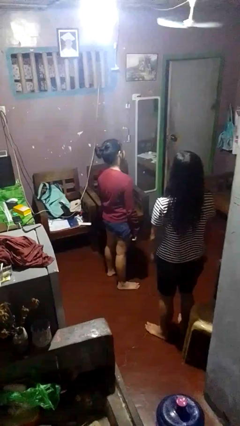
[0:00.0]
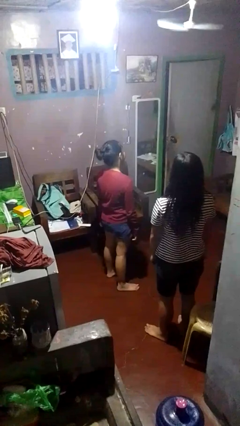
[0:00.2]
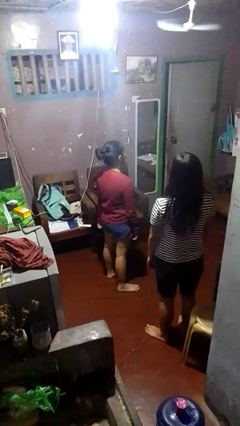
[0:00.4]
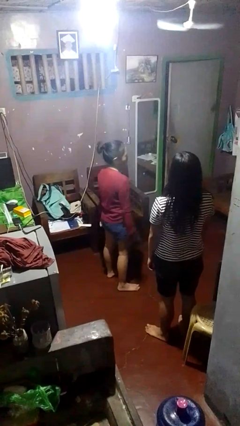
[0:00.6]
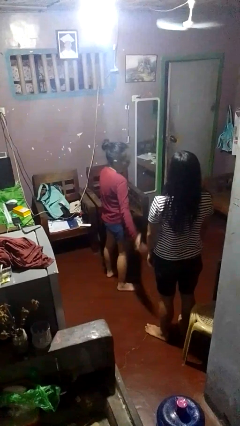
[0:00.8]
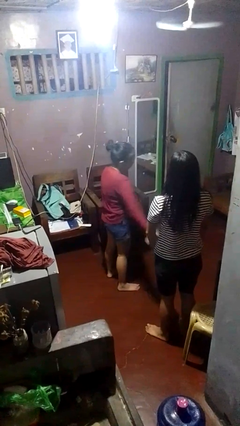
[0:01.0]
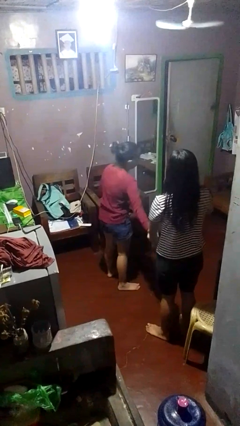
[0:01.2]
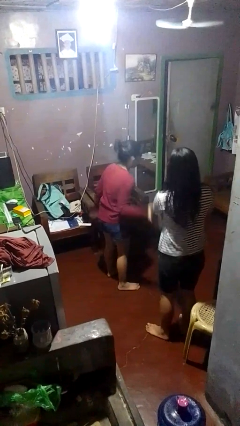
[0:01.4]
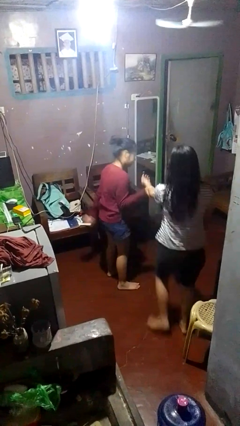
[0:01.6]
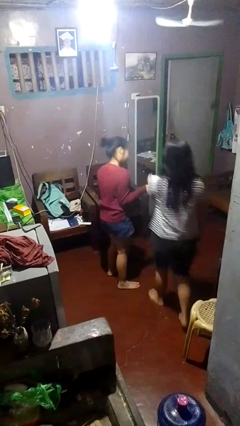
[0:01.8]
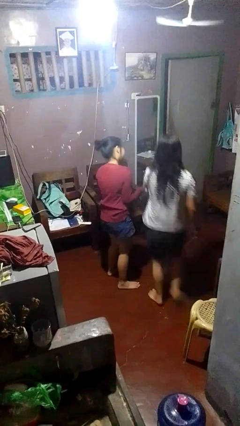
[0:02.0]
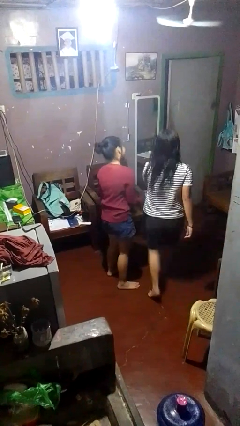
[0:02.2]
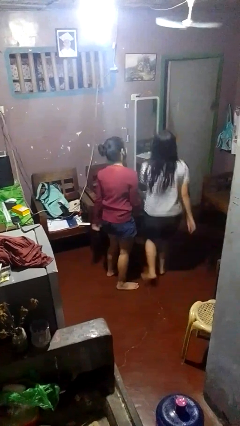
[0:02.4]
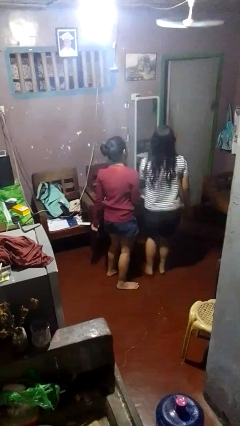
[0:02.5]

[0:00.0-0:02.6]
person grabs person by forearm

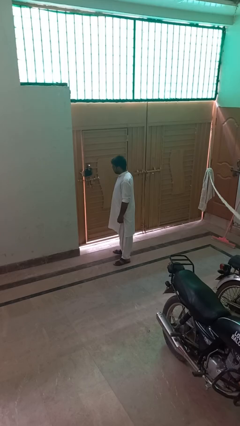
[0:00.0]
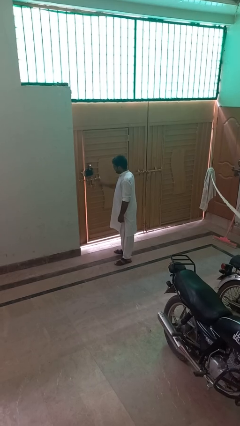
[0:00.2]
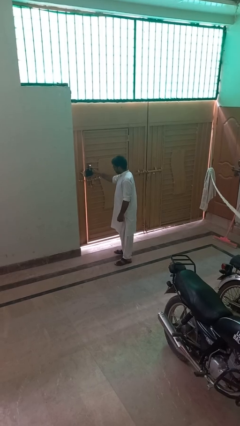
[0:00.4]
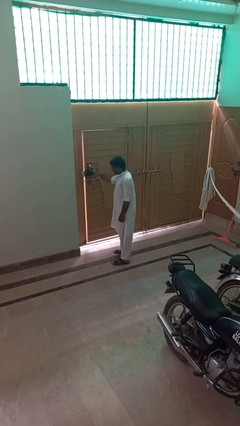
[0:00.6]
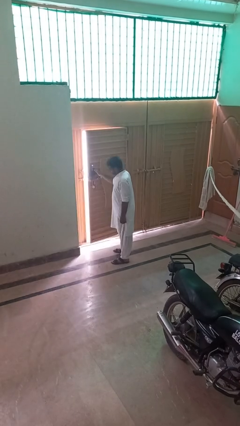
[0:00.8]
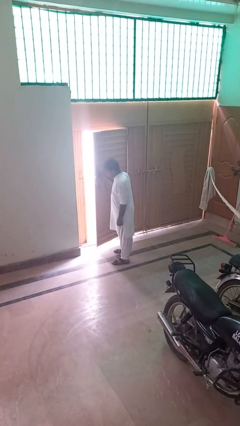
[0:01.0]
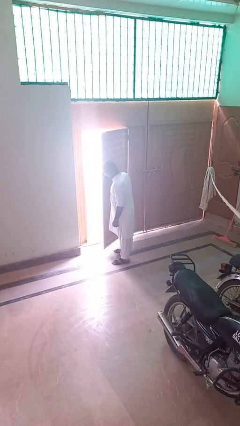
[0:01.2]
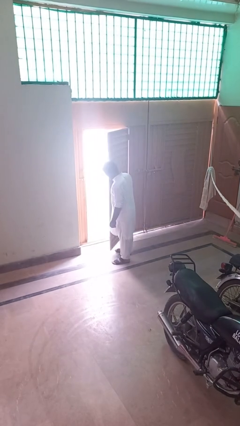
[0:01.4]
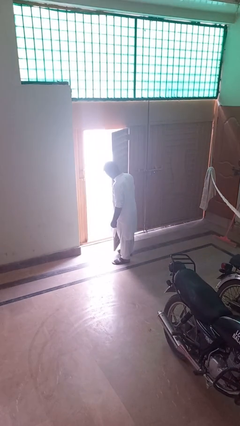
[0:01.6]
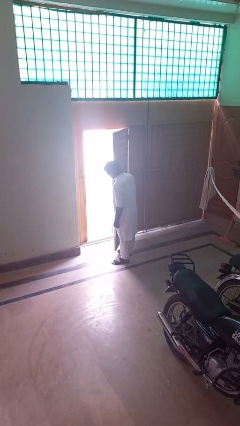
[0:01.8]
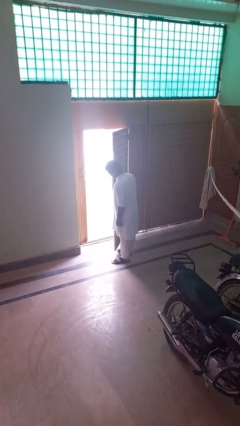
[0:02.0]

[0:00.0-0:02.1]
person opens gate

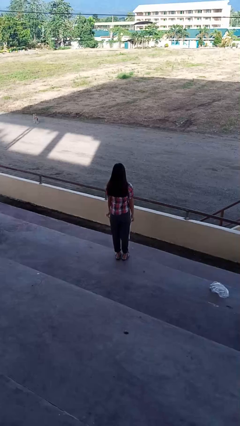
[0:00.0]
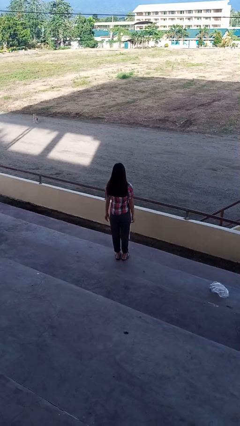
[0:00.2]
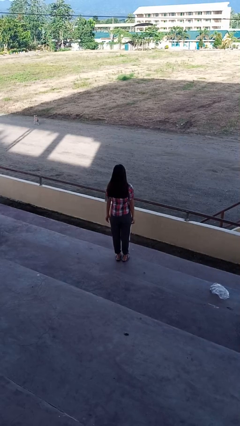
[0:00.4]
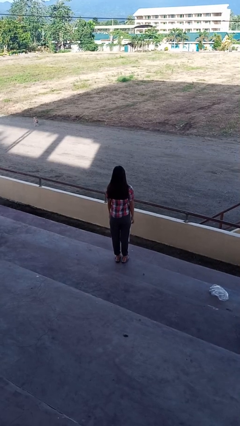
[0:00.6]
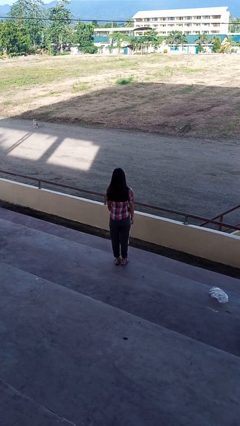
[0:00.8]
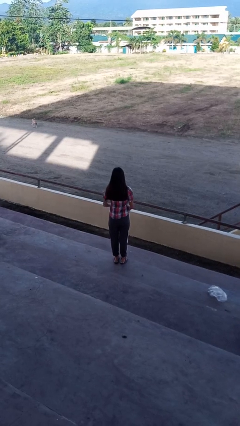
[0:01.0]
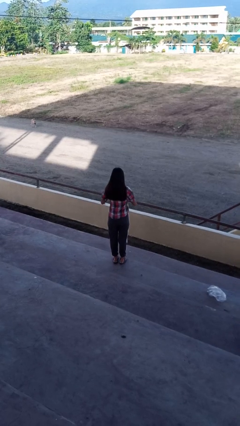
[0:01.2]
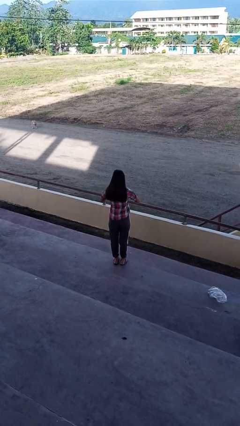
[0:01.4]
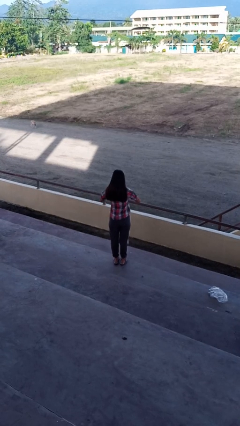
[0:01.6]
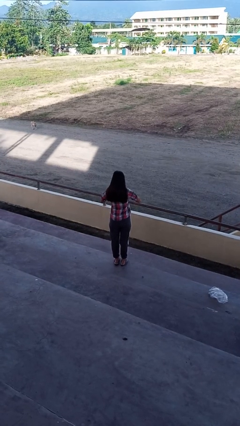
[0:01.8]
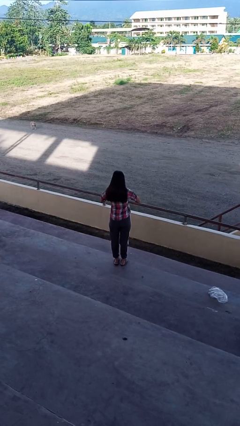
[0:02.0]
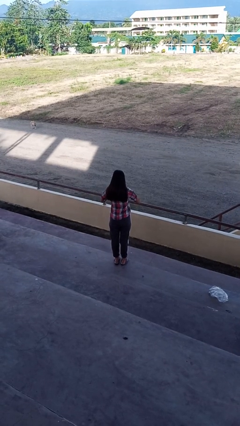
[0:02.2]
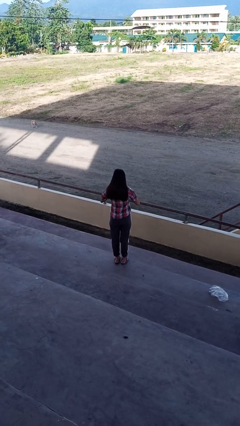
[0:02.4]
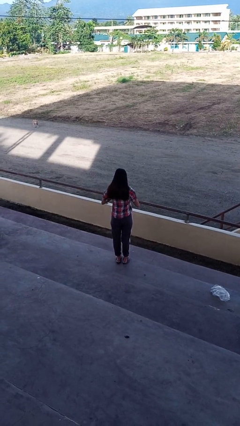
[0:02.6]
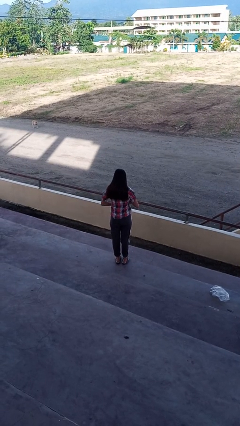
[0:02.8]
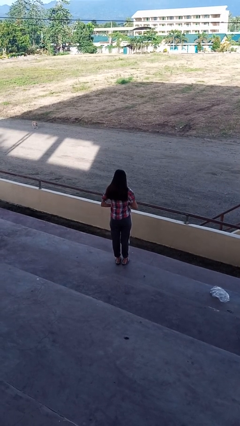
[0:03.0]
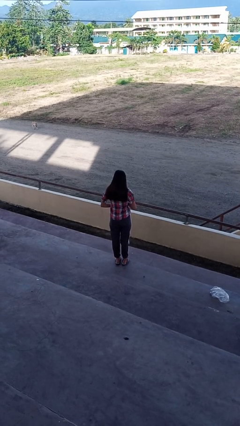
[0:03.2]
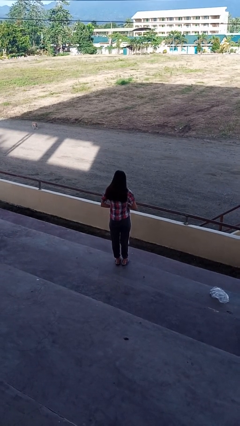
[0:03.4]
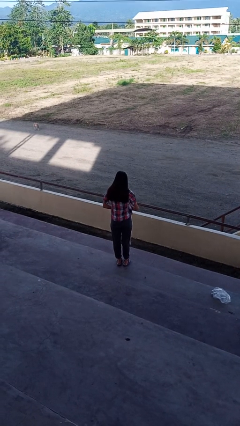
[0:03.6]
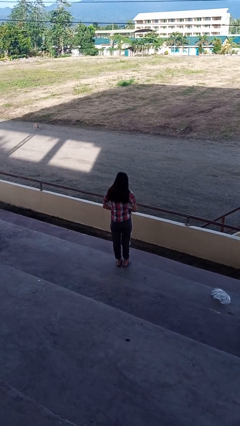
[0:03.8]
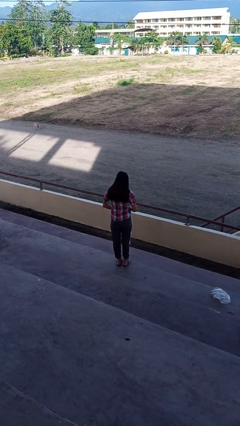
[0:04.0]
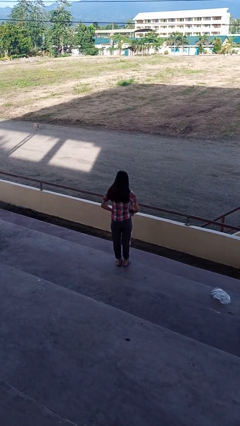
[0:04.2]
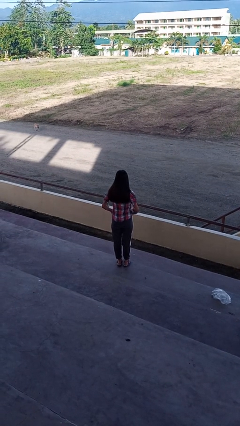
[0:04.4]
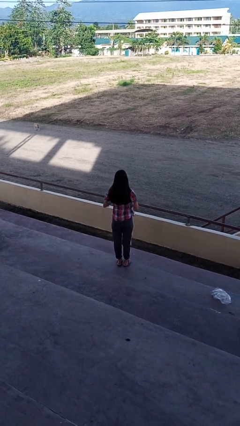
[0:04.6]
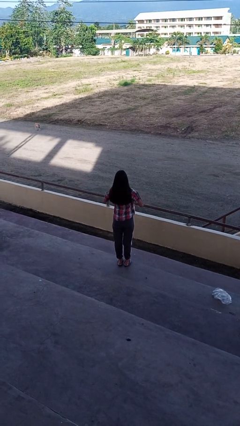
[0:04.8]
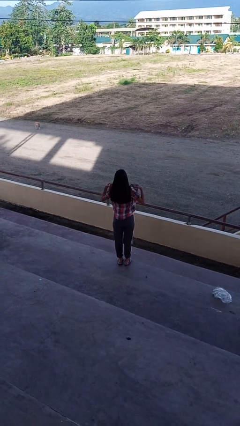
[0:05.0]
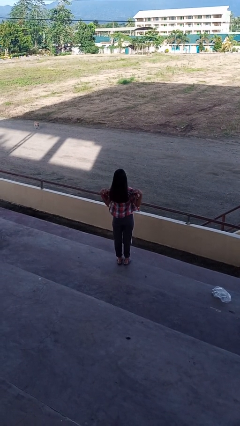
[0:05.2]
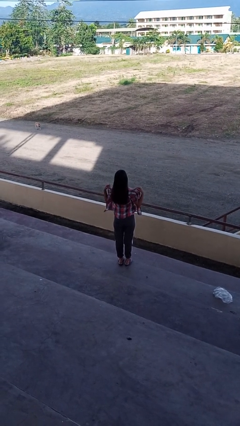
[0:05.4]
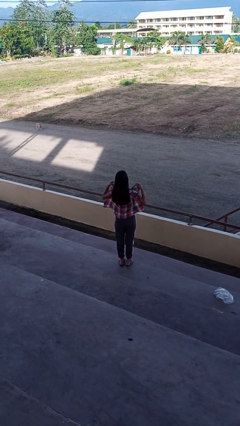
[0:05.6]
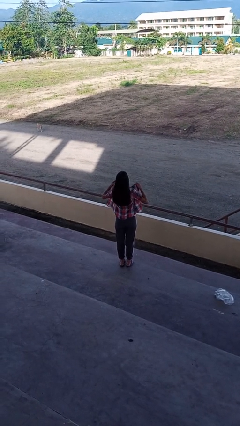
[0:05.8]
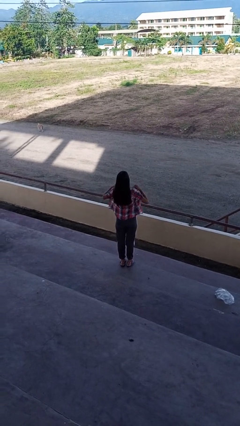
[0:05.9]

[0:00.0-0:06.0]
person unbuttons shirt

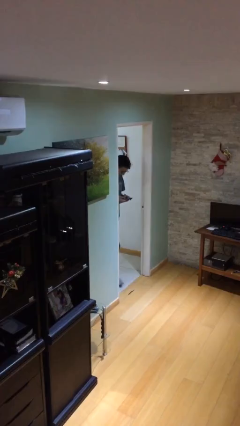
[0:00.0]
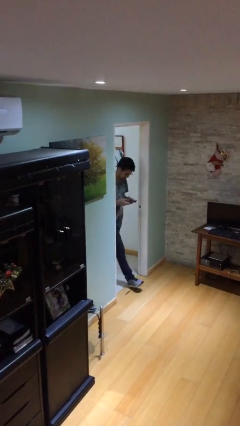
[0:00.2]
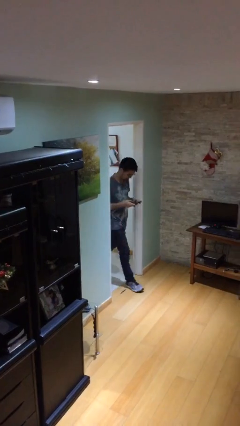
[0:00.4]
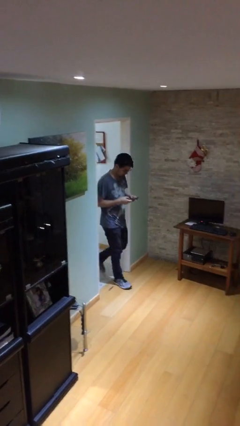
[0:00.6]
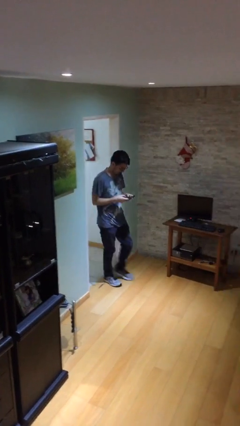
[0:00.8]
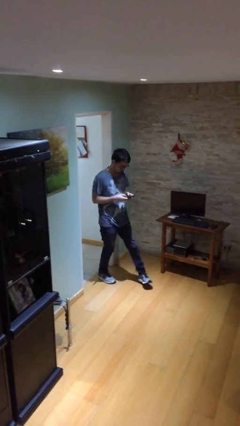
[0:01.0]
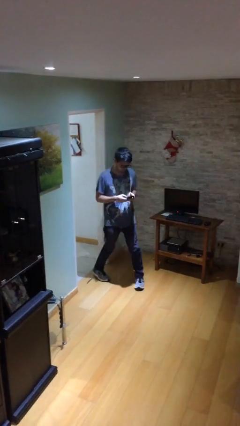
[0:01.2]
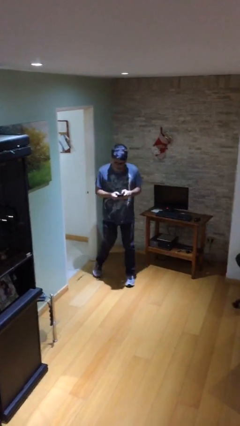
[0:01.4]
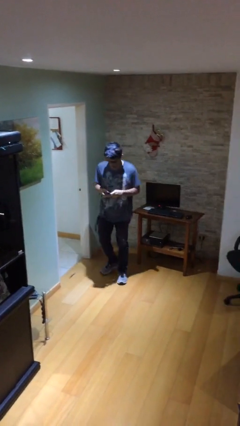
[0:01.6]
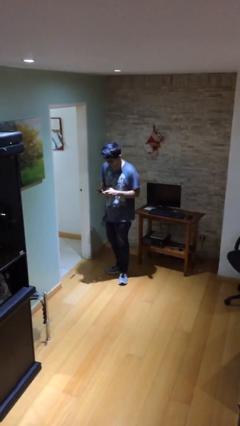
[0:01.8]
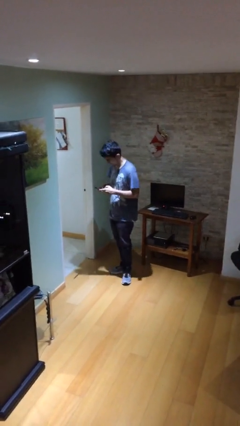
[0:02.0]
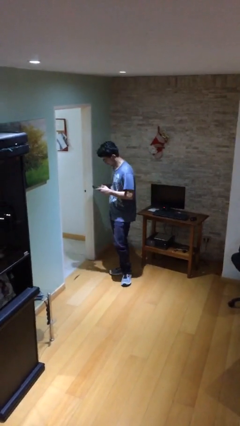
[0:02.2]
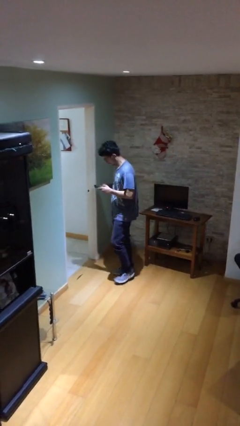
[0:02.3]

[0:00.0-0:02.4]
person enters scene through structure

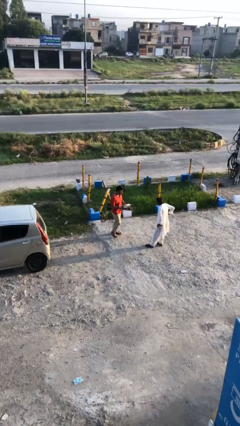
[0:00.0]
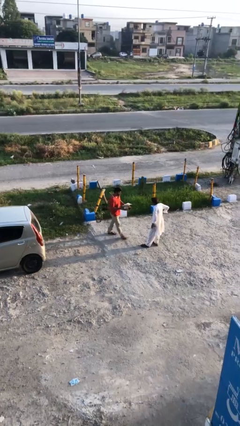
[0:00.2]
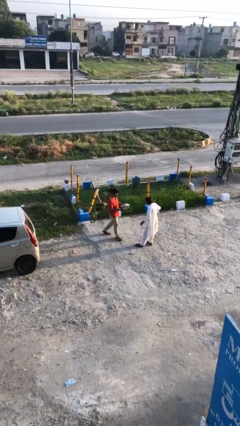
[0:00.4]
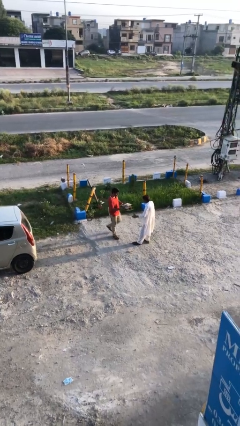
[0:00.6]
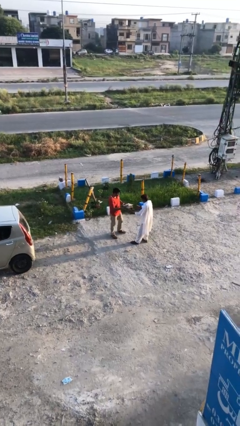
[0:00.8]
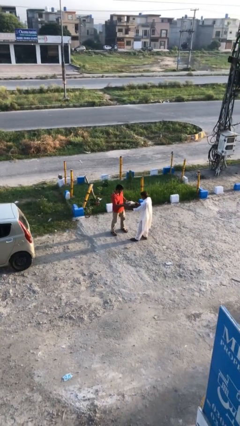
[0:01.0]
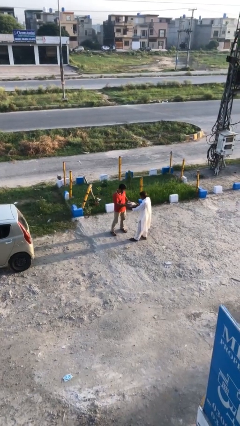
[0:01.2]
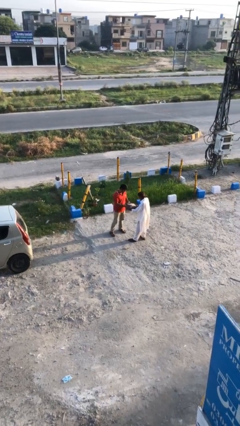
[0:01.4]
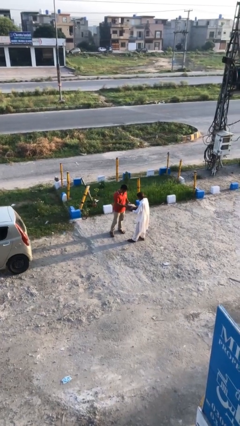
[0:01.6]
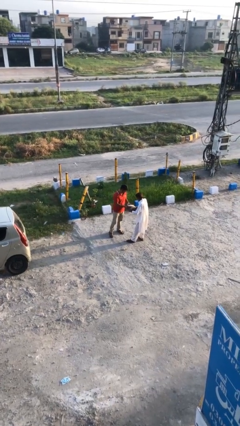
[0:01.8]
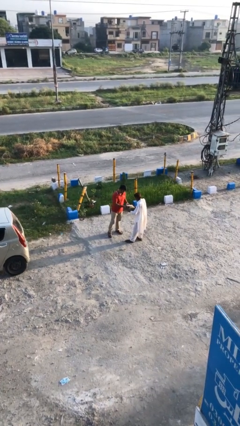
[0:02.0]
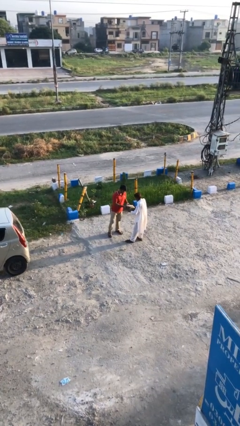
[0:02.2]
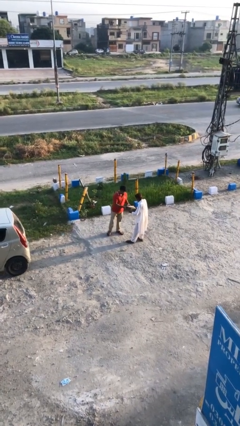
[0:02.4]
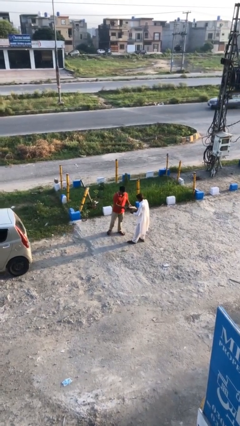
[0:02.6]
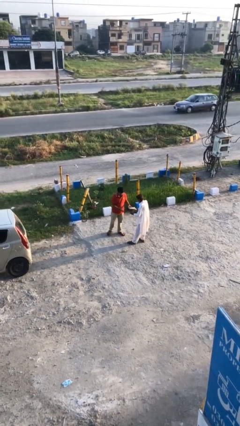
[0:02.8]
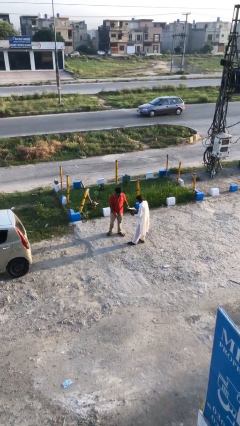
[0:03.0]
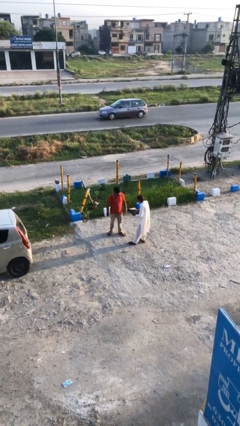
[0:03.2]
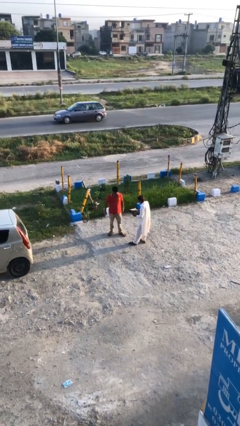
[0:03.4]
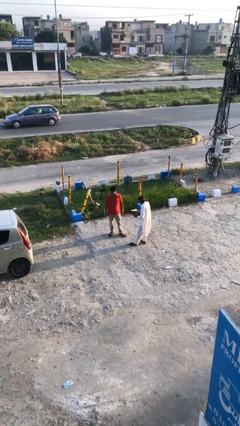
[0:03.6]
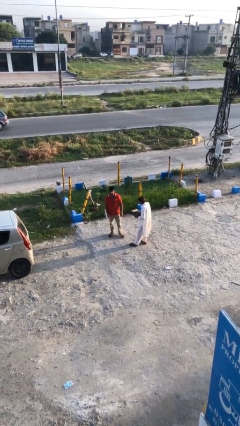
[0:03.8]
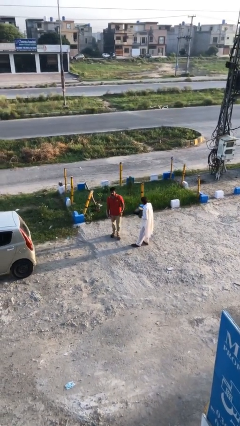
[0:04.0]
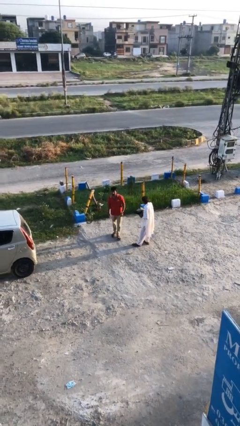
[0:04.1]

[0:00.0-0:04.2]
person transfers object to person

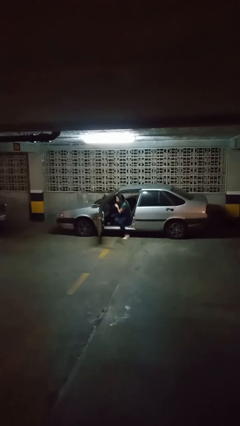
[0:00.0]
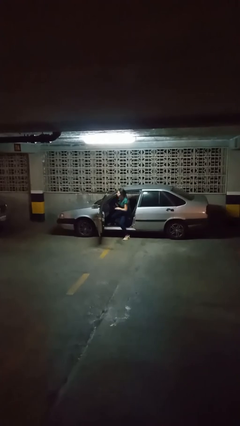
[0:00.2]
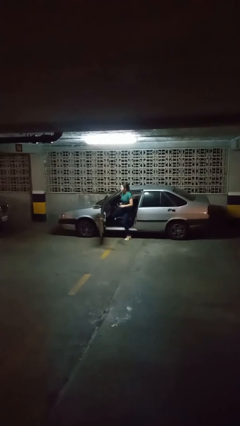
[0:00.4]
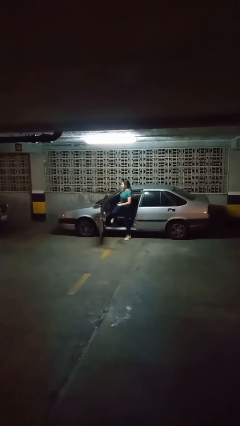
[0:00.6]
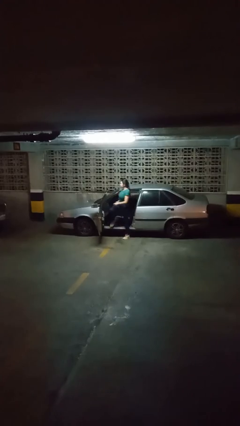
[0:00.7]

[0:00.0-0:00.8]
person exits car
